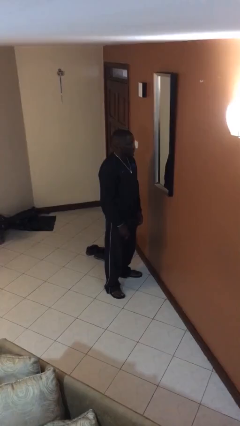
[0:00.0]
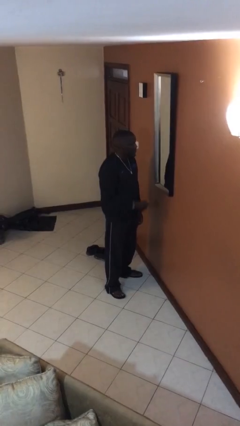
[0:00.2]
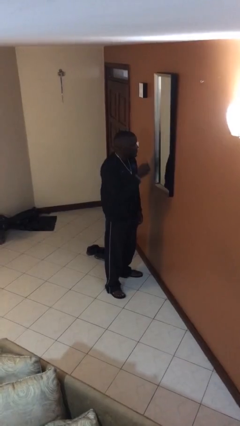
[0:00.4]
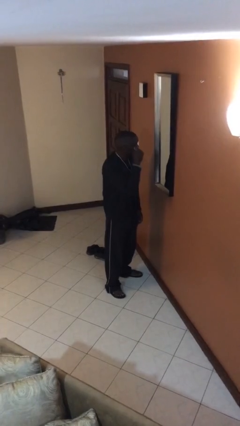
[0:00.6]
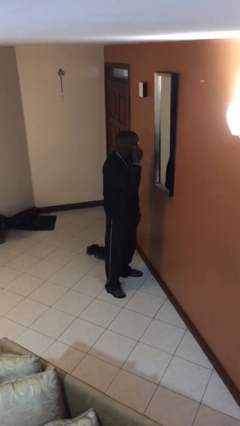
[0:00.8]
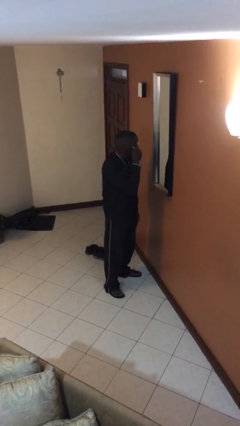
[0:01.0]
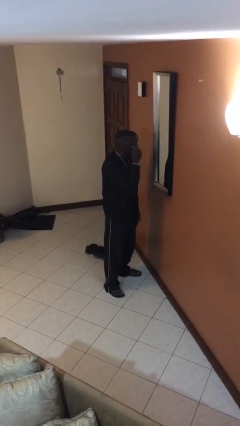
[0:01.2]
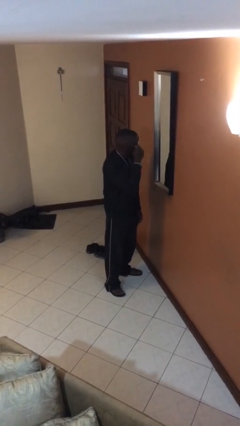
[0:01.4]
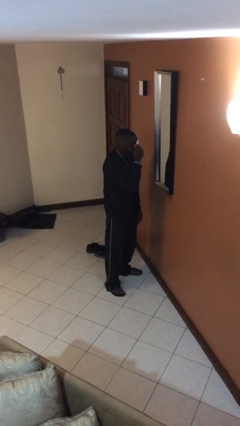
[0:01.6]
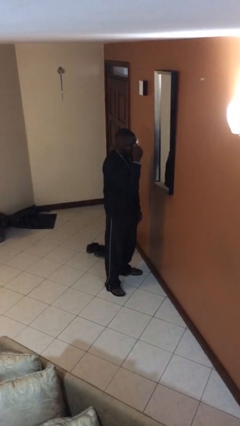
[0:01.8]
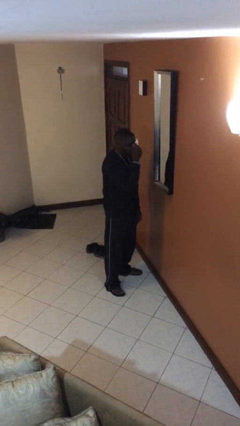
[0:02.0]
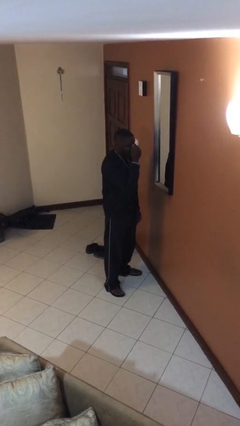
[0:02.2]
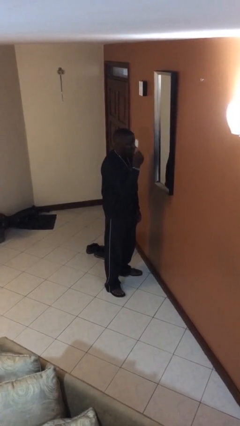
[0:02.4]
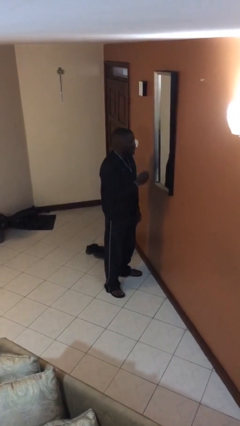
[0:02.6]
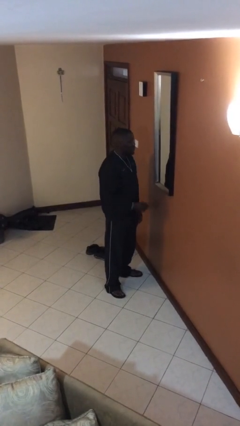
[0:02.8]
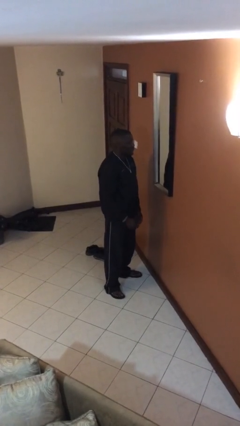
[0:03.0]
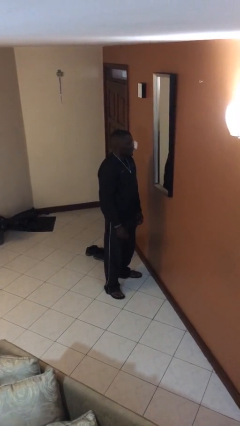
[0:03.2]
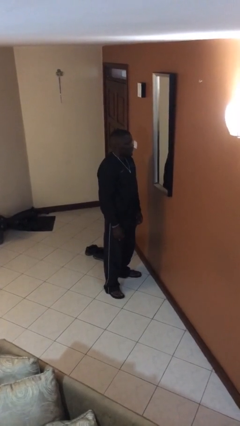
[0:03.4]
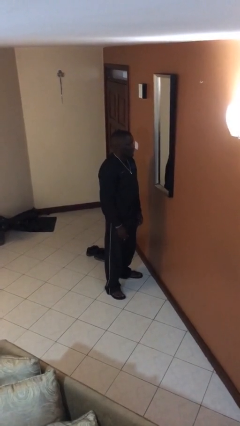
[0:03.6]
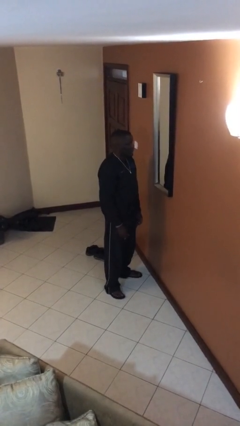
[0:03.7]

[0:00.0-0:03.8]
person applies eye makeup

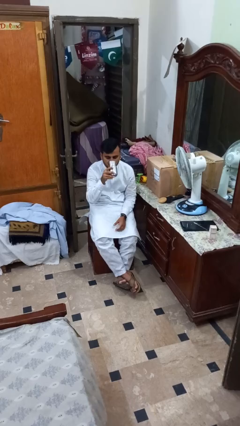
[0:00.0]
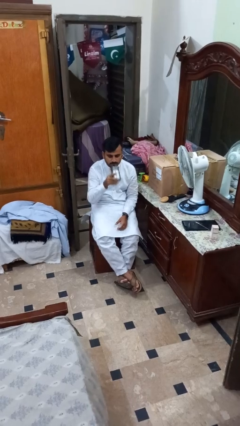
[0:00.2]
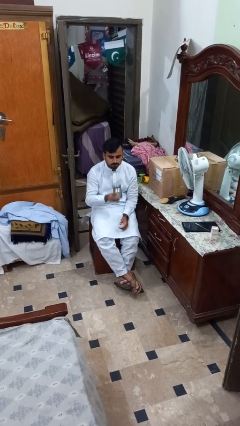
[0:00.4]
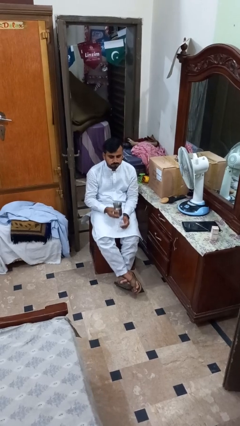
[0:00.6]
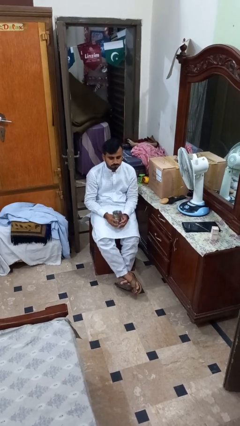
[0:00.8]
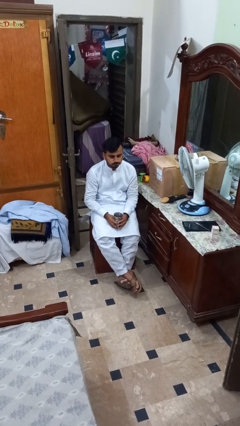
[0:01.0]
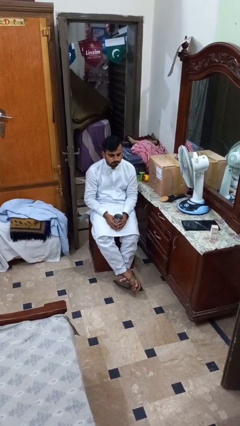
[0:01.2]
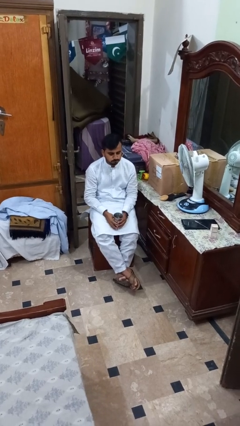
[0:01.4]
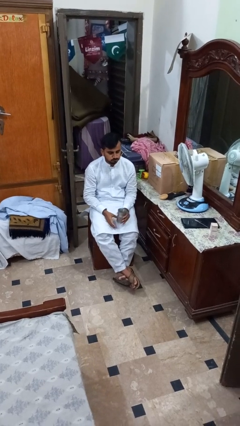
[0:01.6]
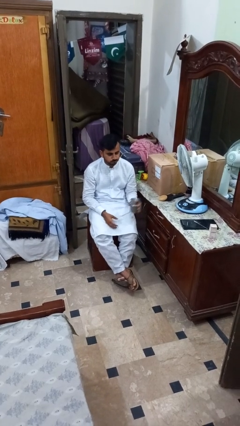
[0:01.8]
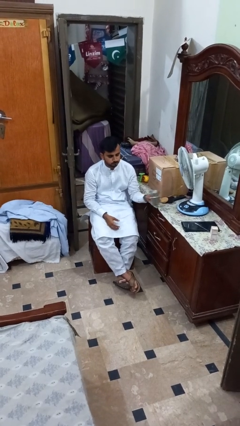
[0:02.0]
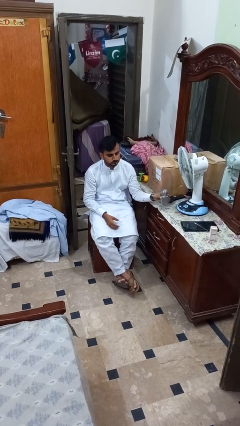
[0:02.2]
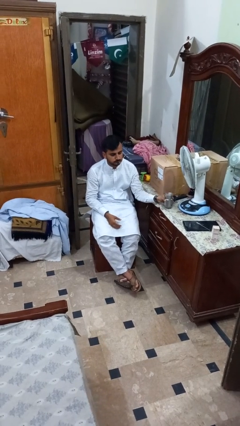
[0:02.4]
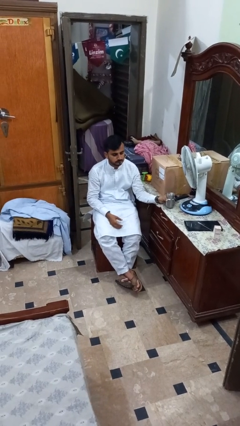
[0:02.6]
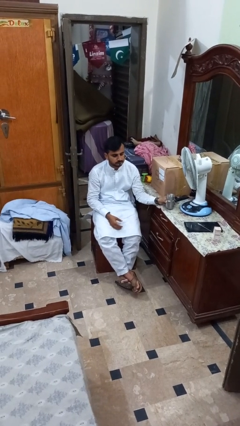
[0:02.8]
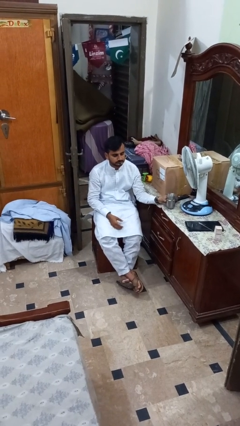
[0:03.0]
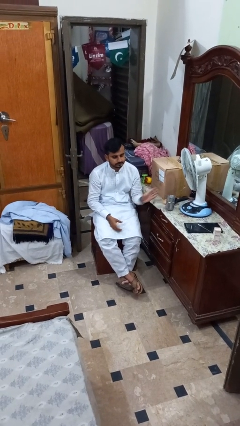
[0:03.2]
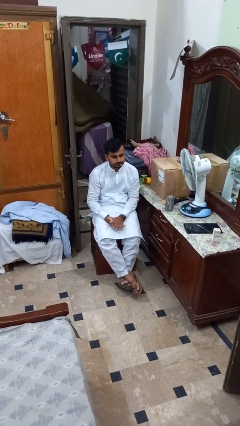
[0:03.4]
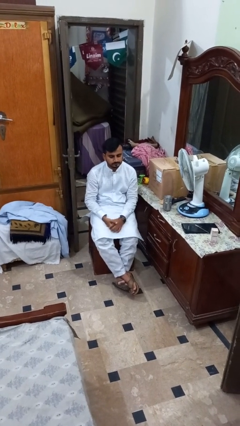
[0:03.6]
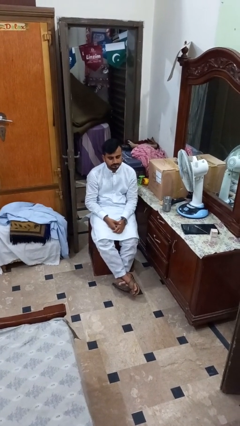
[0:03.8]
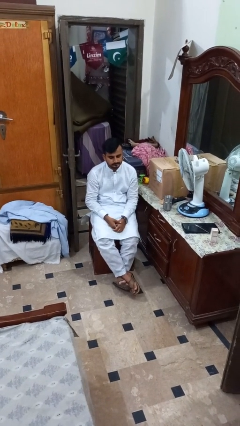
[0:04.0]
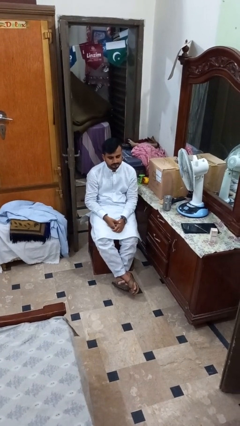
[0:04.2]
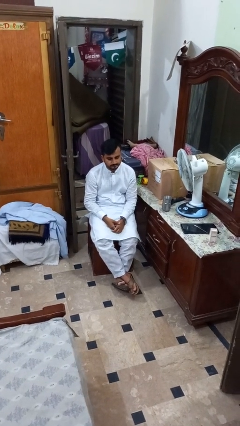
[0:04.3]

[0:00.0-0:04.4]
person puts down object on table

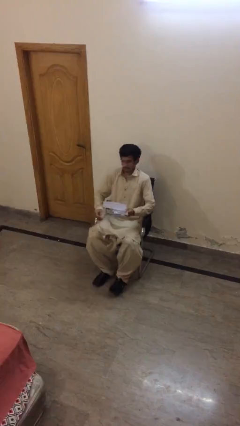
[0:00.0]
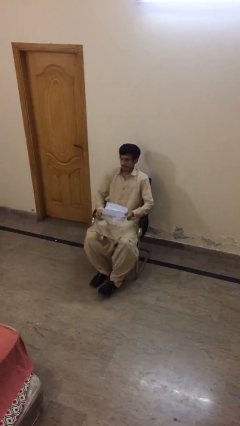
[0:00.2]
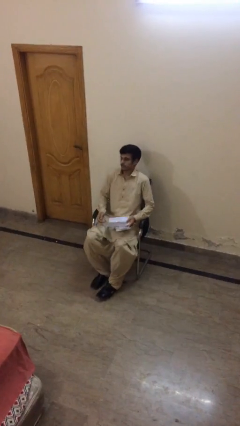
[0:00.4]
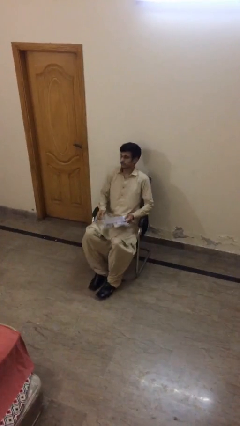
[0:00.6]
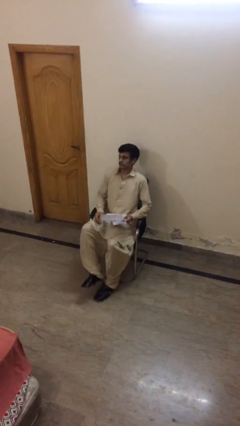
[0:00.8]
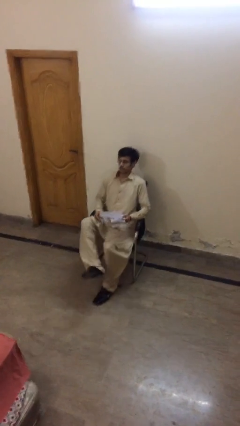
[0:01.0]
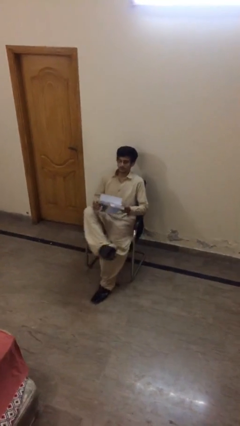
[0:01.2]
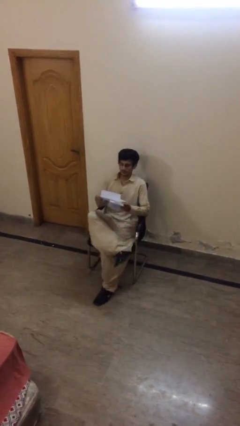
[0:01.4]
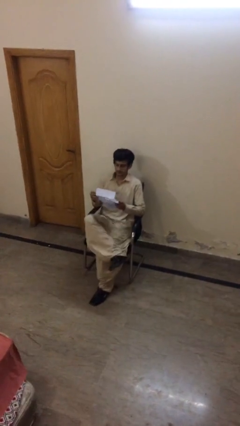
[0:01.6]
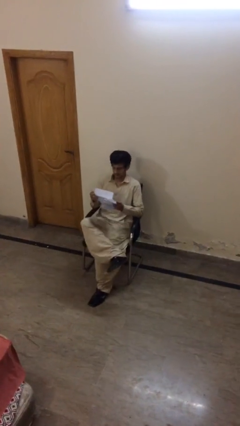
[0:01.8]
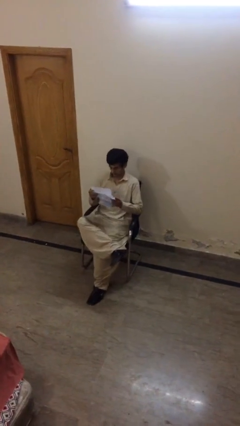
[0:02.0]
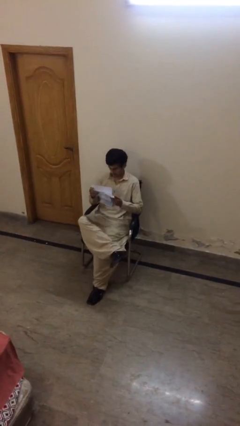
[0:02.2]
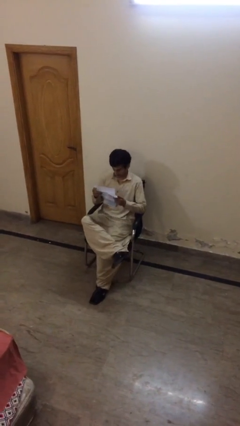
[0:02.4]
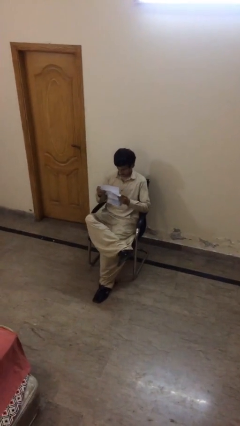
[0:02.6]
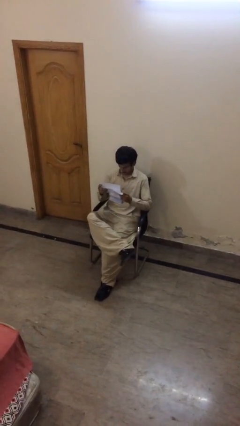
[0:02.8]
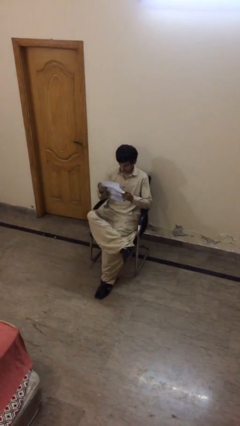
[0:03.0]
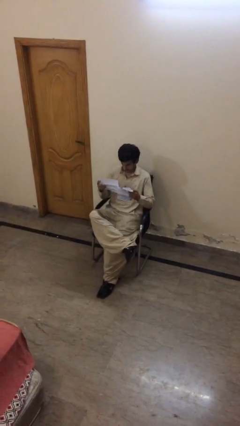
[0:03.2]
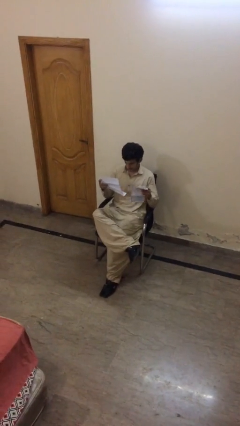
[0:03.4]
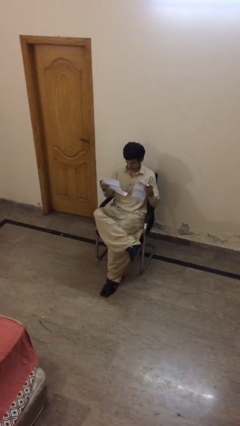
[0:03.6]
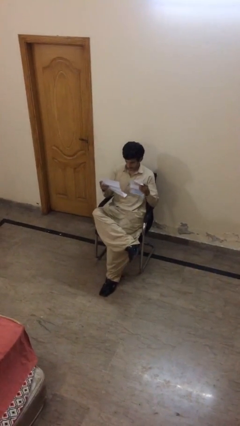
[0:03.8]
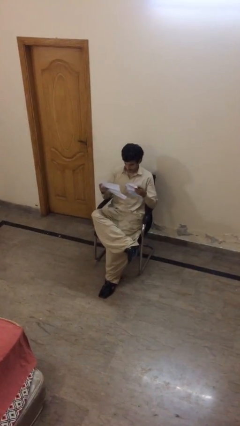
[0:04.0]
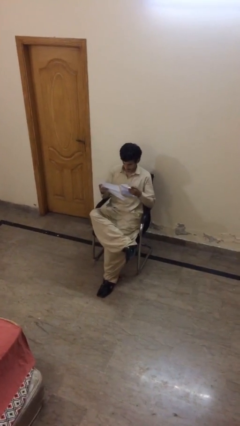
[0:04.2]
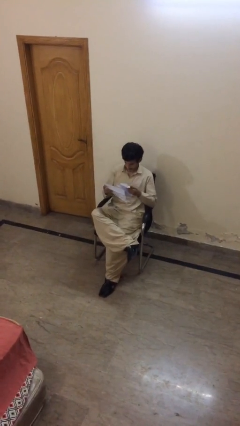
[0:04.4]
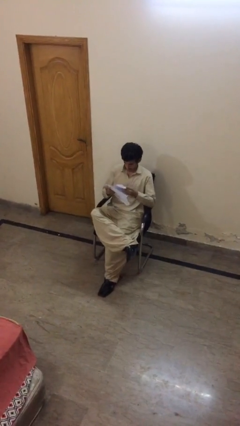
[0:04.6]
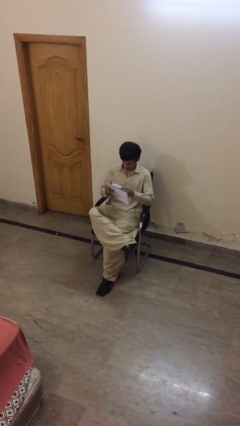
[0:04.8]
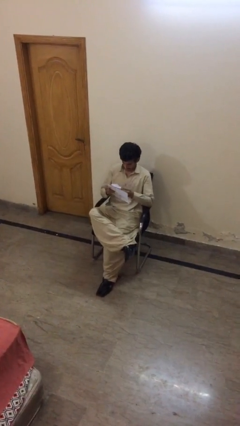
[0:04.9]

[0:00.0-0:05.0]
person reads document

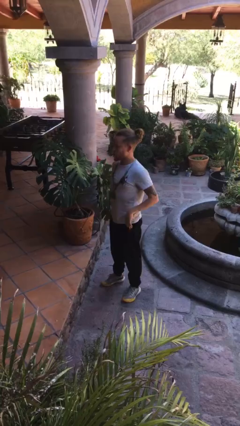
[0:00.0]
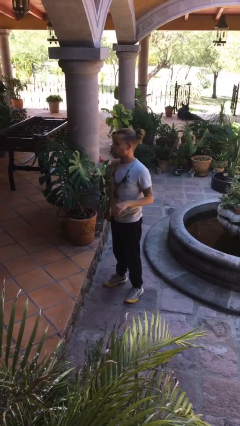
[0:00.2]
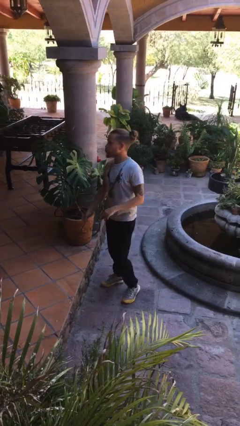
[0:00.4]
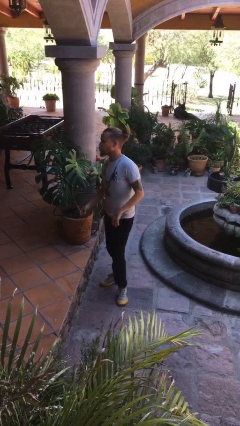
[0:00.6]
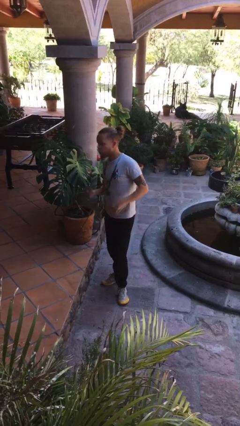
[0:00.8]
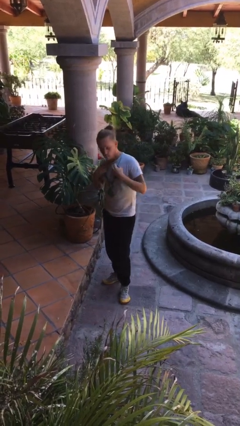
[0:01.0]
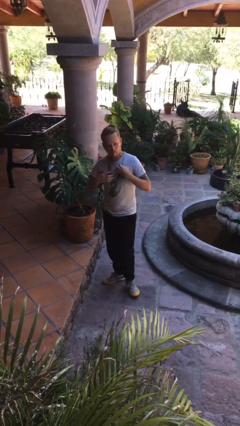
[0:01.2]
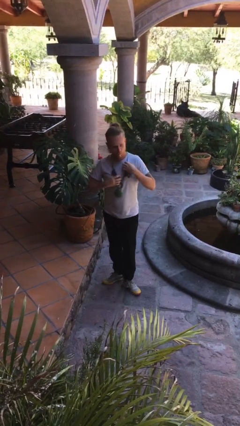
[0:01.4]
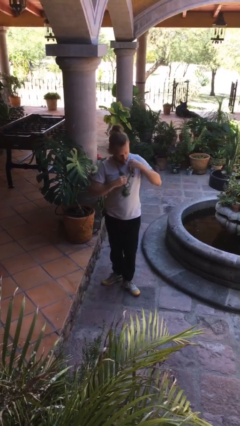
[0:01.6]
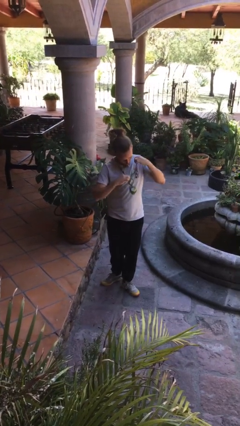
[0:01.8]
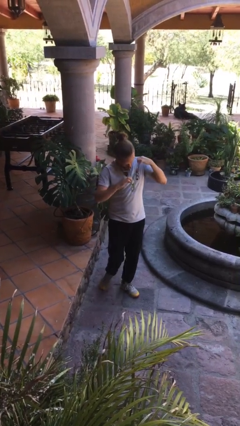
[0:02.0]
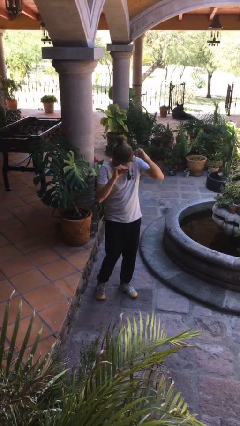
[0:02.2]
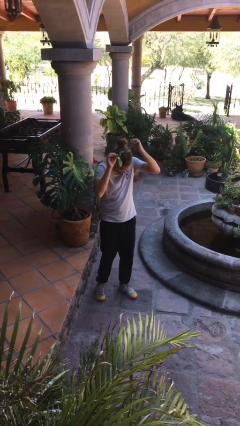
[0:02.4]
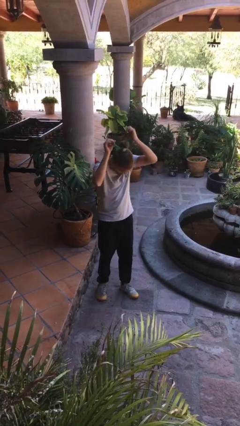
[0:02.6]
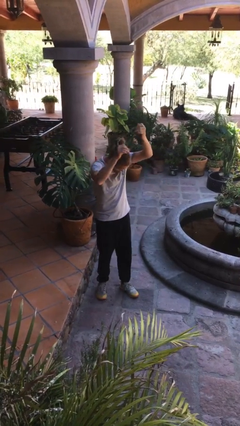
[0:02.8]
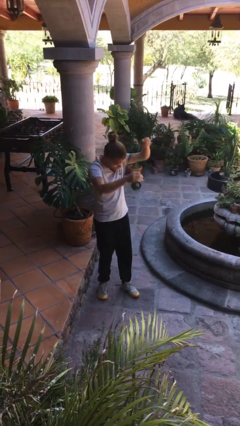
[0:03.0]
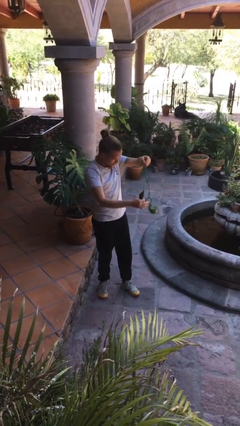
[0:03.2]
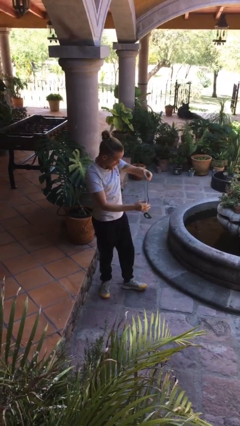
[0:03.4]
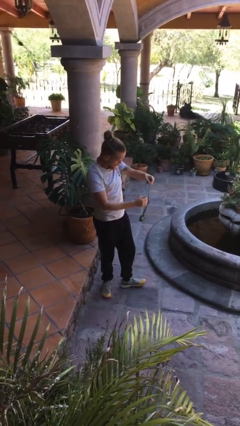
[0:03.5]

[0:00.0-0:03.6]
person takes off necklace

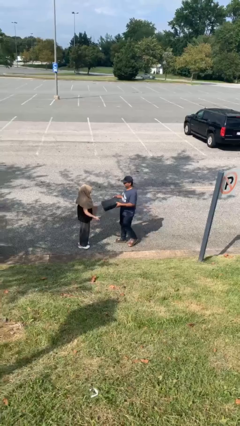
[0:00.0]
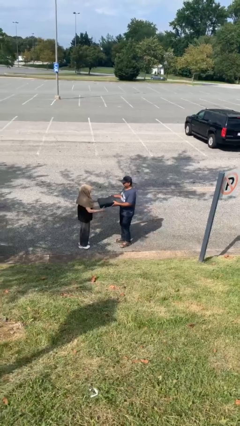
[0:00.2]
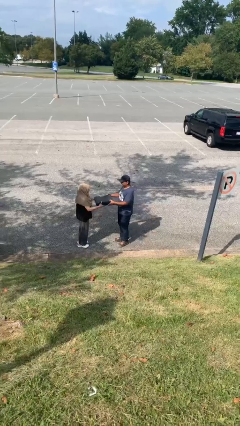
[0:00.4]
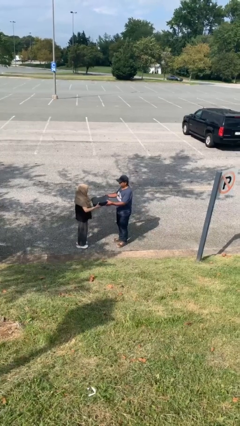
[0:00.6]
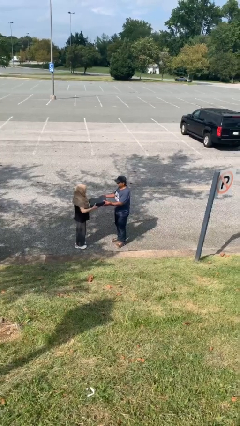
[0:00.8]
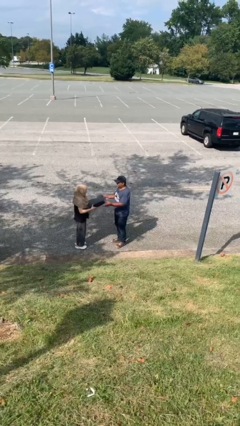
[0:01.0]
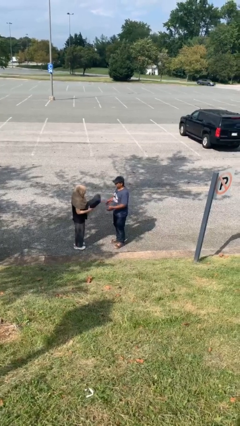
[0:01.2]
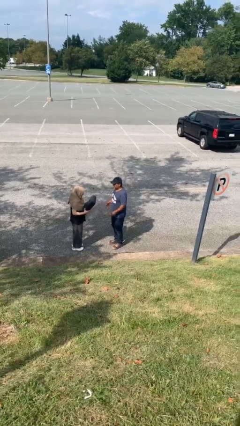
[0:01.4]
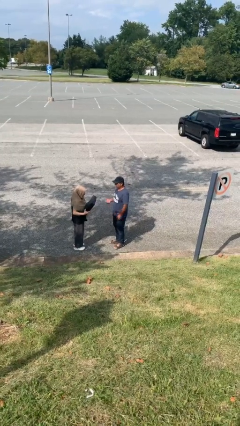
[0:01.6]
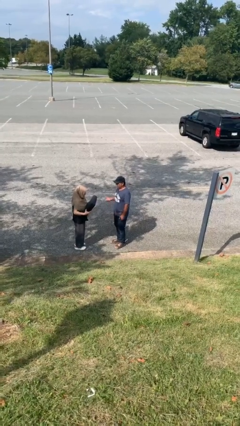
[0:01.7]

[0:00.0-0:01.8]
person transfers object to person
